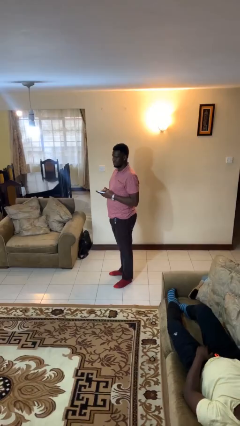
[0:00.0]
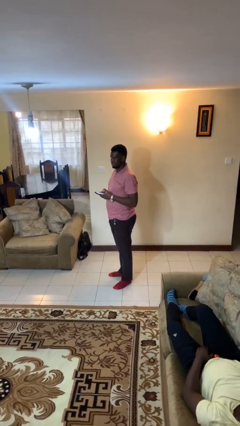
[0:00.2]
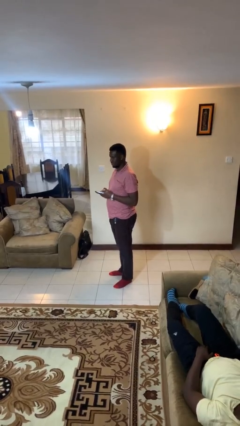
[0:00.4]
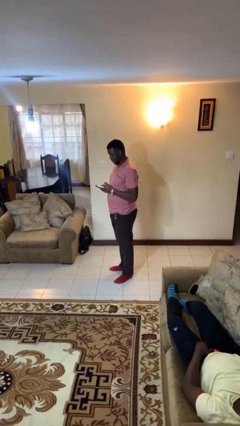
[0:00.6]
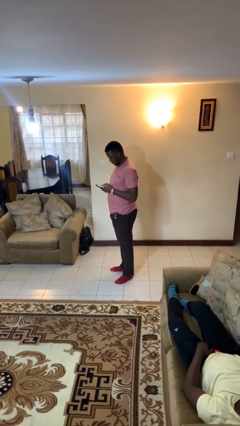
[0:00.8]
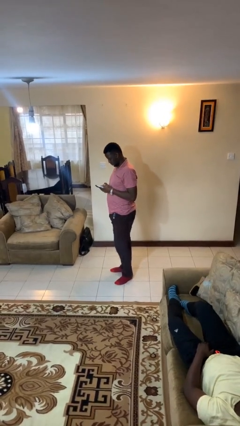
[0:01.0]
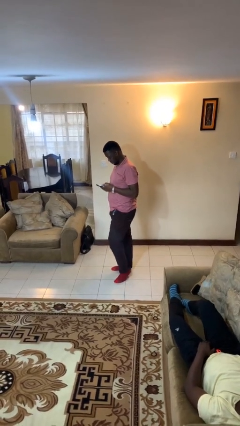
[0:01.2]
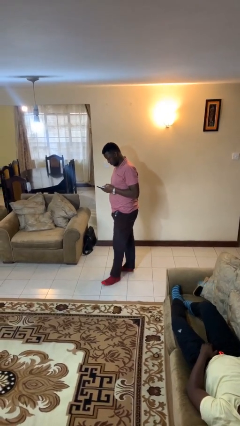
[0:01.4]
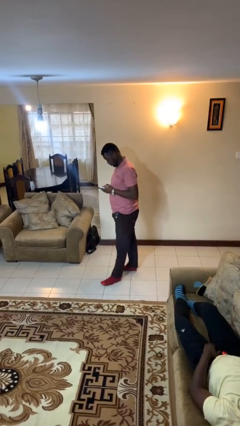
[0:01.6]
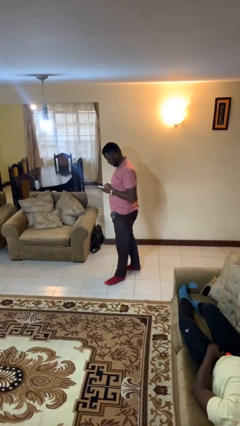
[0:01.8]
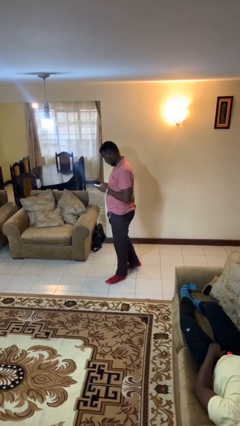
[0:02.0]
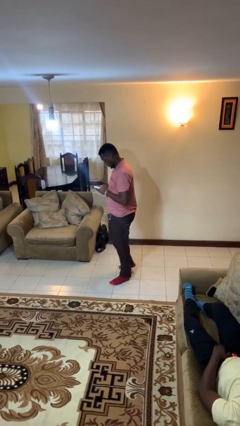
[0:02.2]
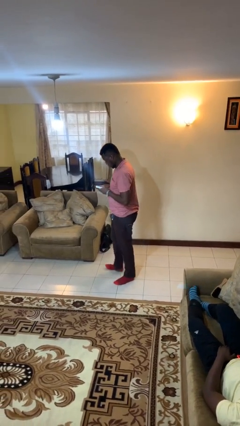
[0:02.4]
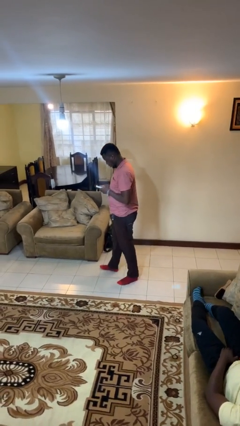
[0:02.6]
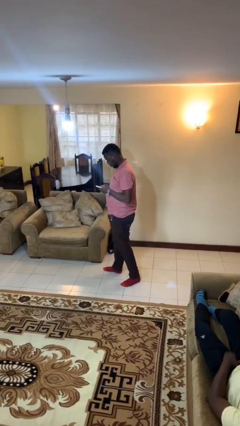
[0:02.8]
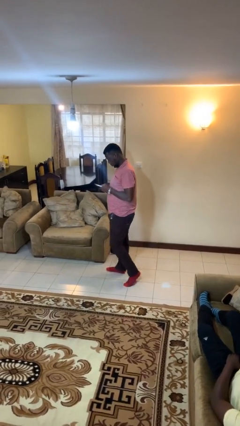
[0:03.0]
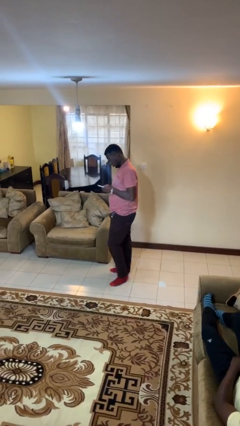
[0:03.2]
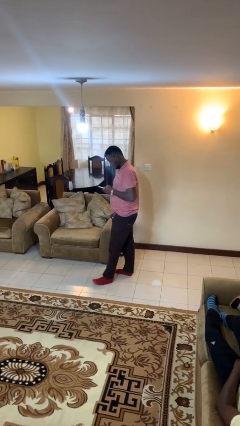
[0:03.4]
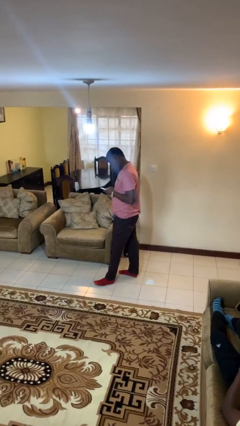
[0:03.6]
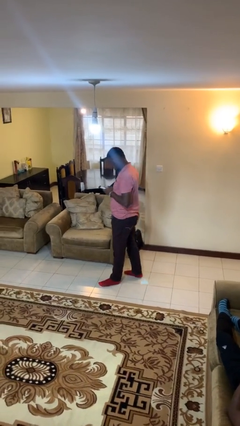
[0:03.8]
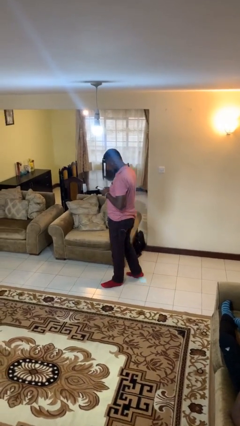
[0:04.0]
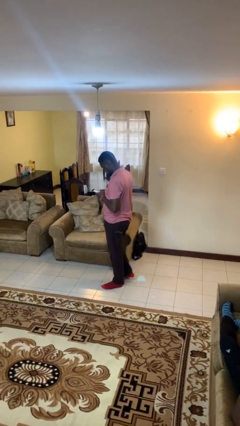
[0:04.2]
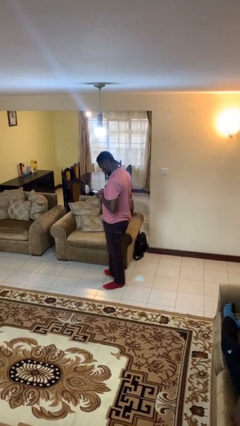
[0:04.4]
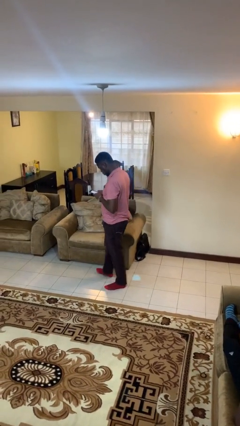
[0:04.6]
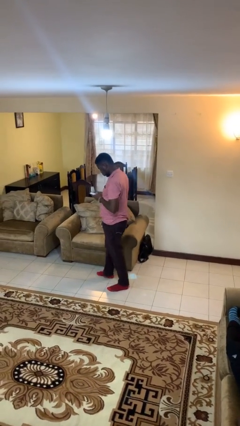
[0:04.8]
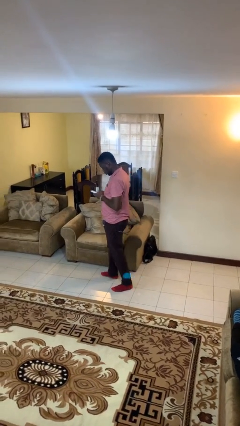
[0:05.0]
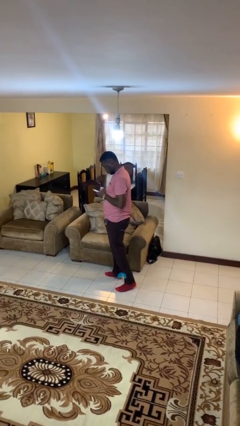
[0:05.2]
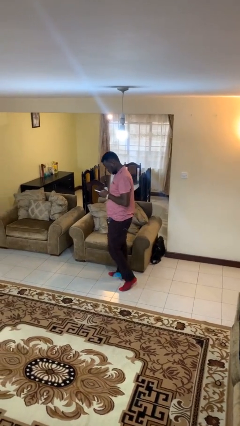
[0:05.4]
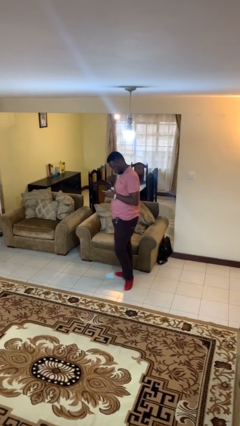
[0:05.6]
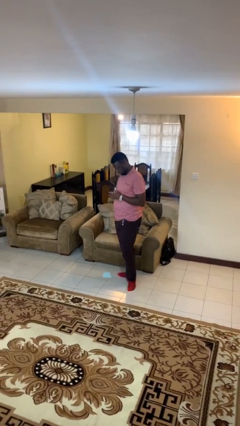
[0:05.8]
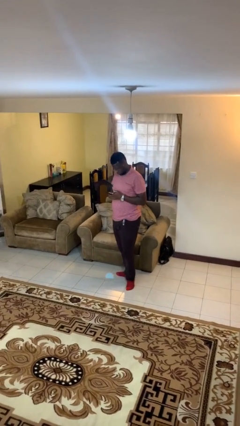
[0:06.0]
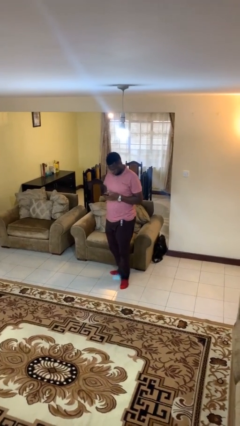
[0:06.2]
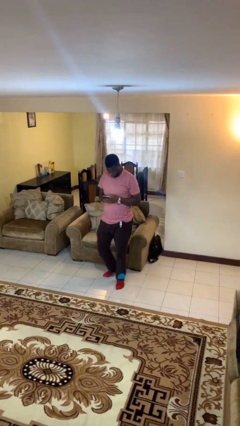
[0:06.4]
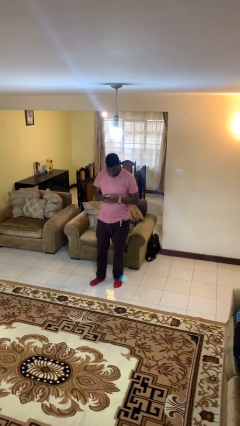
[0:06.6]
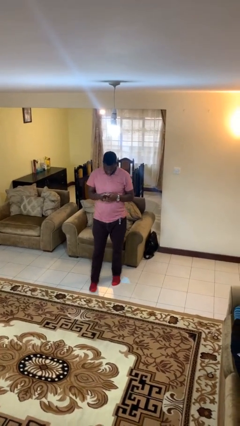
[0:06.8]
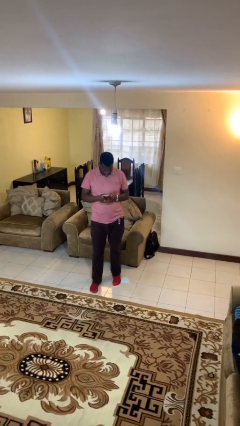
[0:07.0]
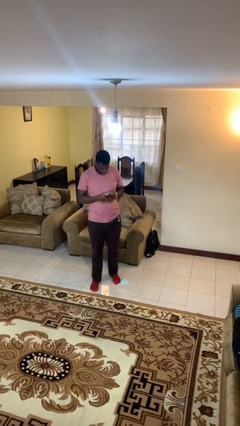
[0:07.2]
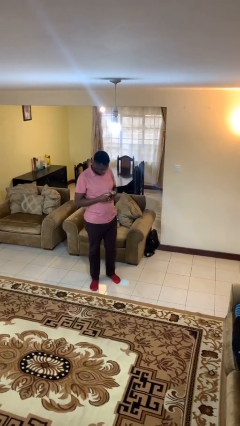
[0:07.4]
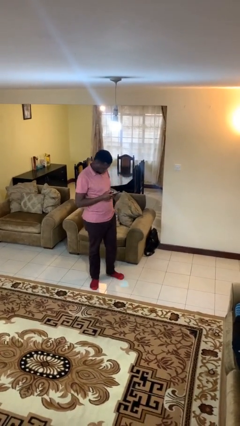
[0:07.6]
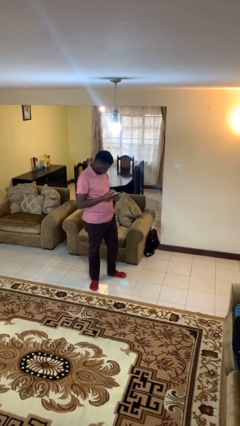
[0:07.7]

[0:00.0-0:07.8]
person texts on phone

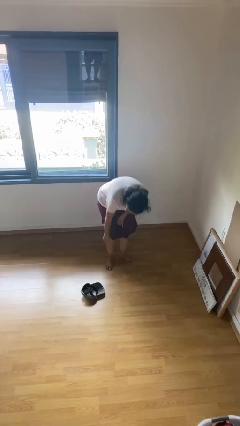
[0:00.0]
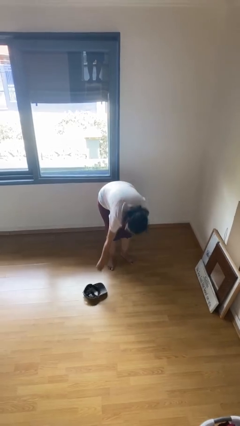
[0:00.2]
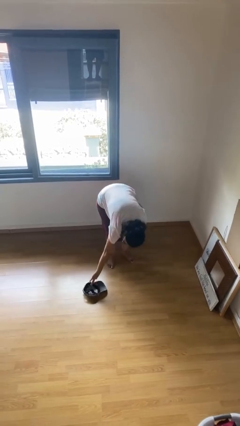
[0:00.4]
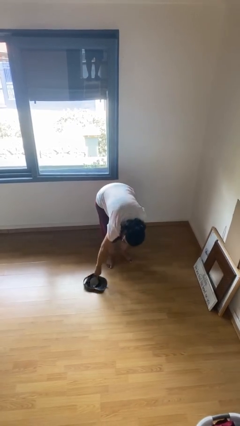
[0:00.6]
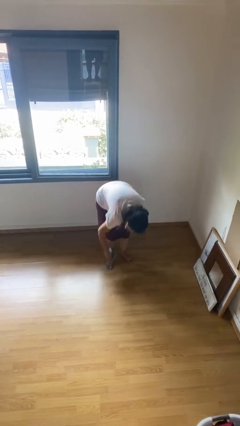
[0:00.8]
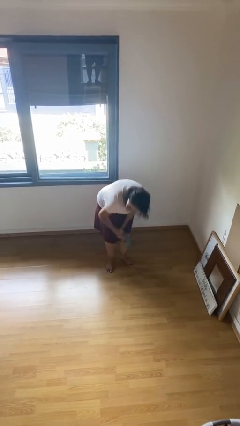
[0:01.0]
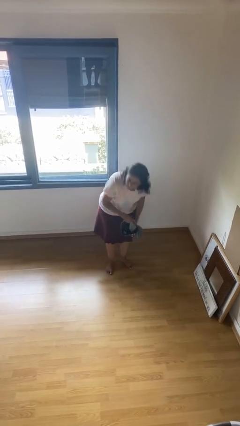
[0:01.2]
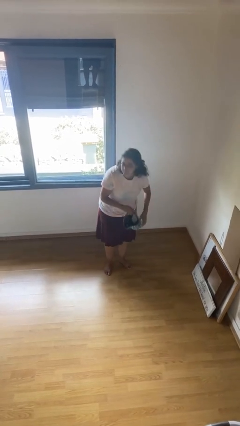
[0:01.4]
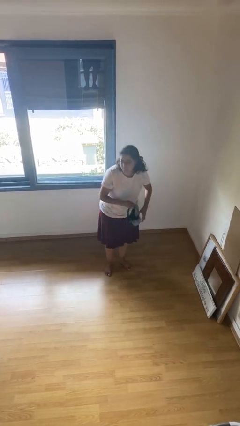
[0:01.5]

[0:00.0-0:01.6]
person picks up object from floor

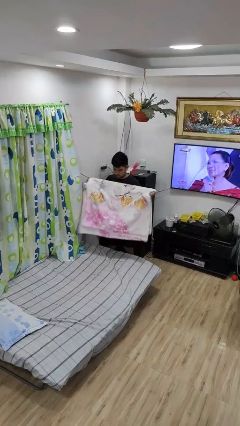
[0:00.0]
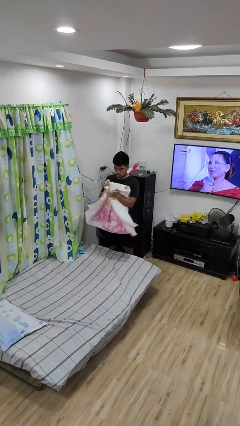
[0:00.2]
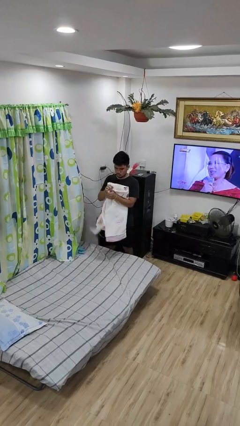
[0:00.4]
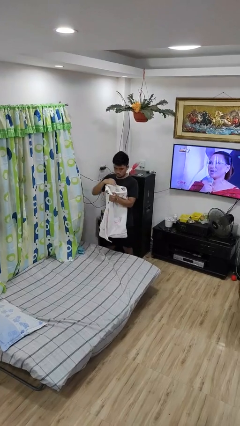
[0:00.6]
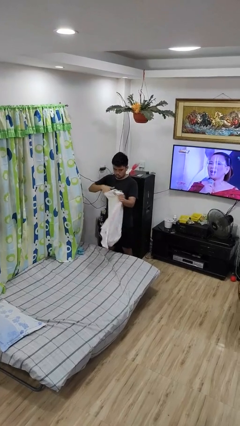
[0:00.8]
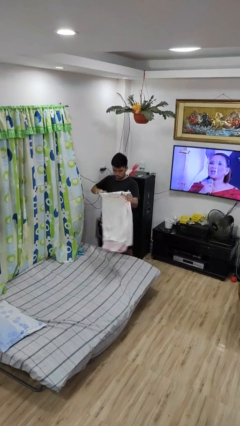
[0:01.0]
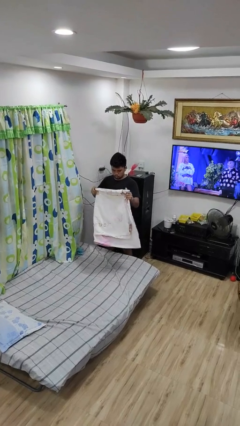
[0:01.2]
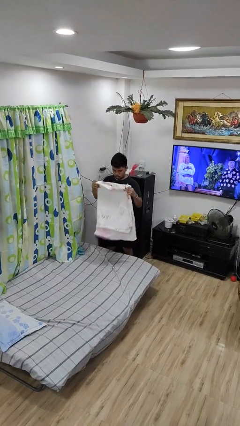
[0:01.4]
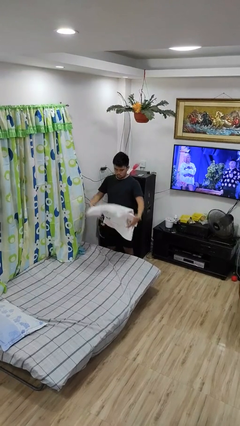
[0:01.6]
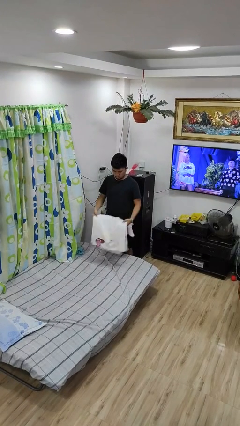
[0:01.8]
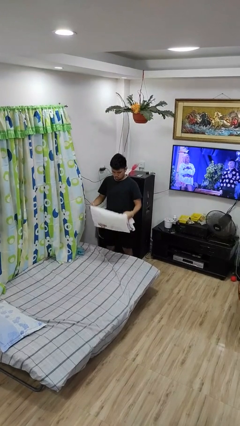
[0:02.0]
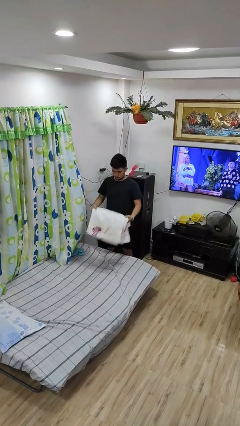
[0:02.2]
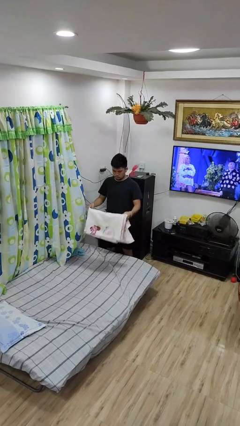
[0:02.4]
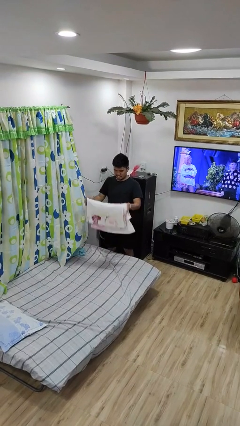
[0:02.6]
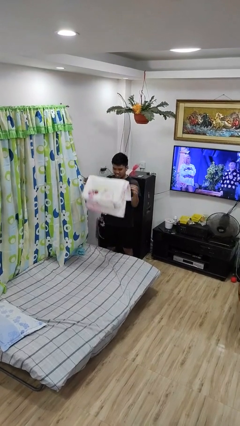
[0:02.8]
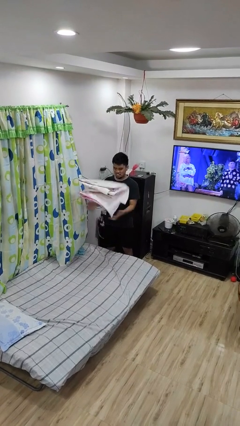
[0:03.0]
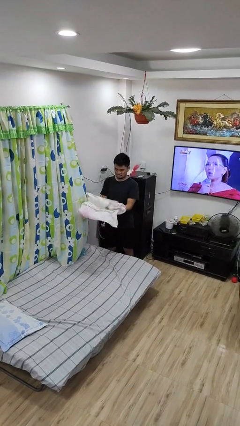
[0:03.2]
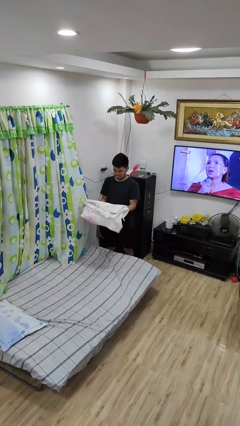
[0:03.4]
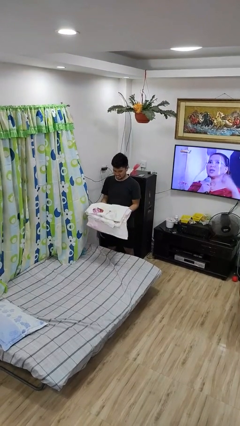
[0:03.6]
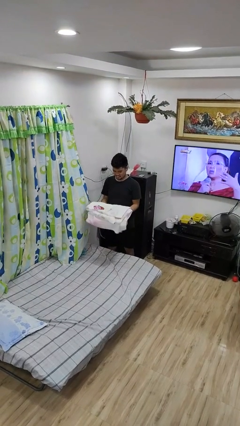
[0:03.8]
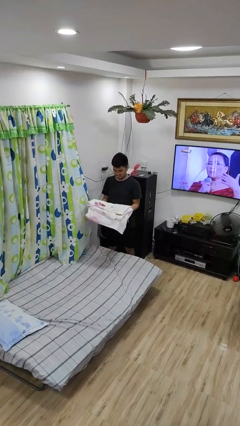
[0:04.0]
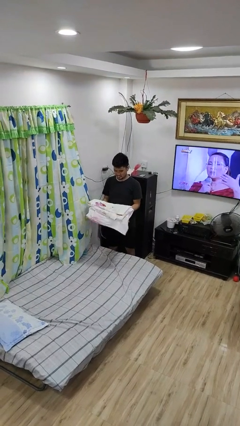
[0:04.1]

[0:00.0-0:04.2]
person folds blanket

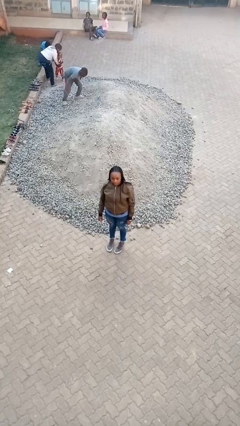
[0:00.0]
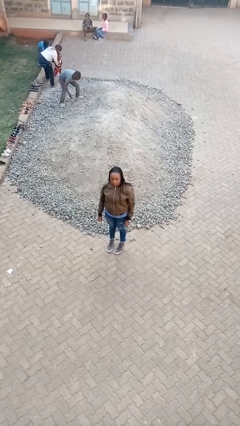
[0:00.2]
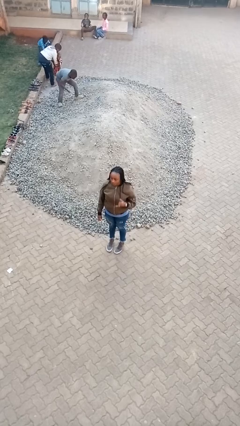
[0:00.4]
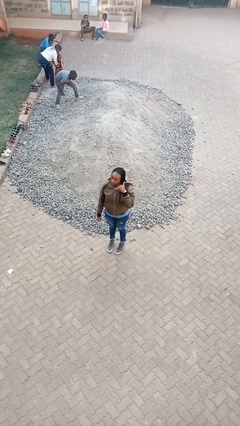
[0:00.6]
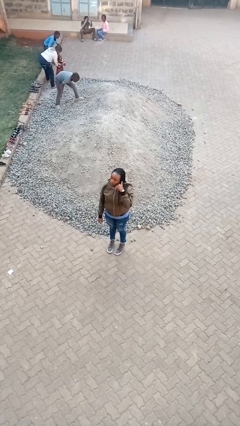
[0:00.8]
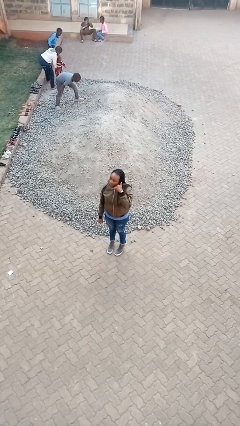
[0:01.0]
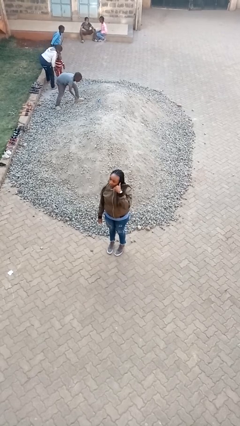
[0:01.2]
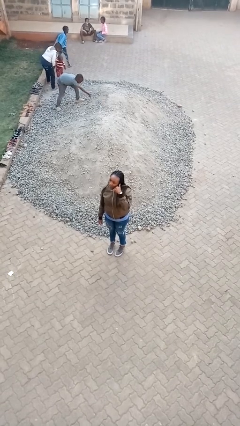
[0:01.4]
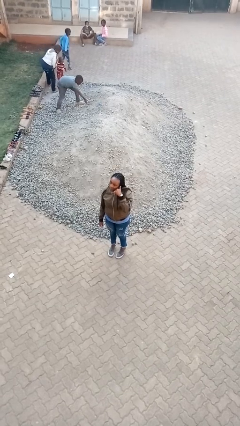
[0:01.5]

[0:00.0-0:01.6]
person gestures call me

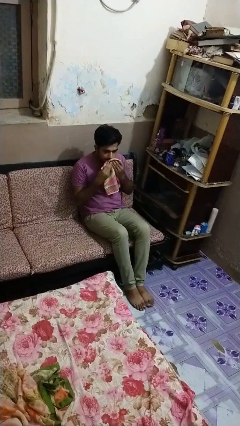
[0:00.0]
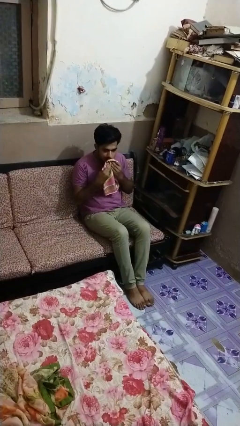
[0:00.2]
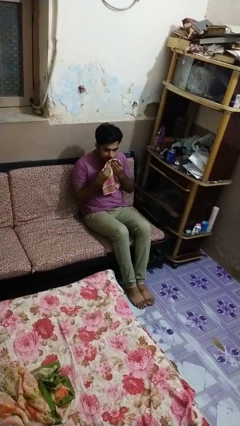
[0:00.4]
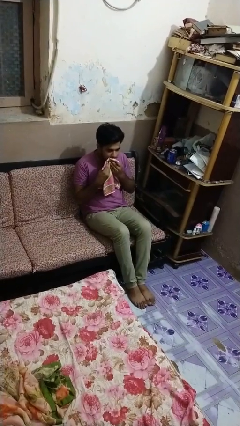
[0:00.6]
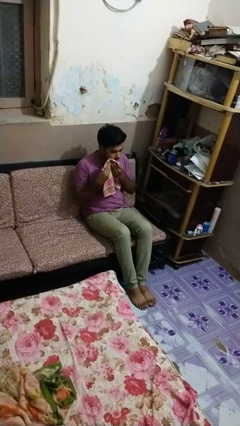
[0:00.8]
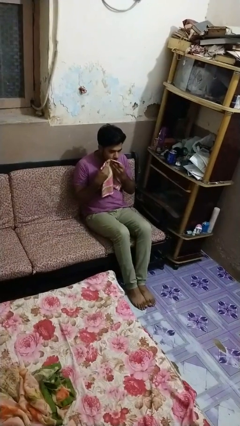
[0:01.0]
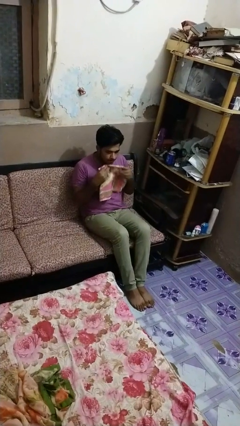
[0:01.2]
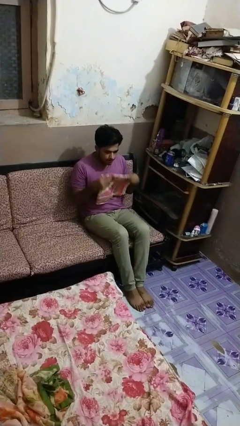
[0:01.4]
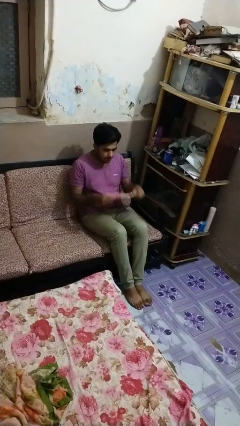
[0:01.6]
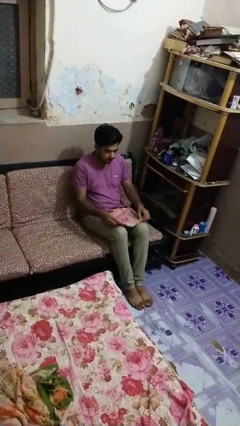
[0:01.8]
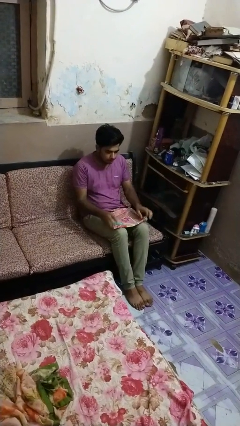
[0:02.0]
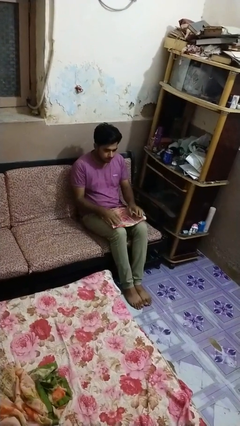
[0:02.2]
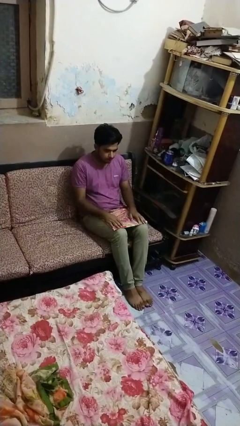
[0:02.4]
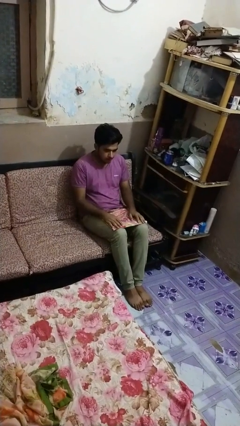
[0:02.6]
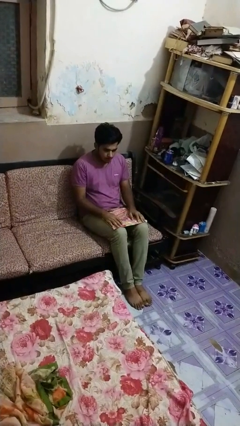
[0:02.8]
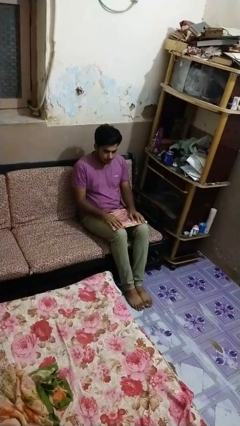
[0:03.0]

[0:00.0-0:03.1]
person wipes mouth with napkin
